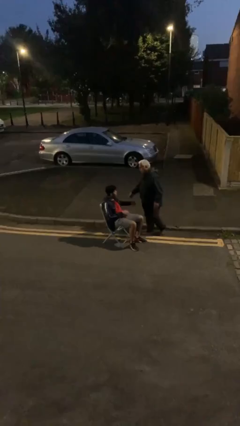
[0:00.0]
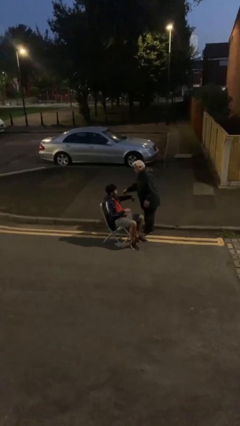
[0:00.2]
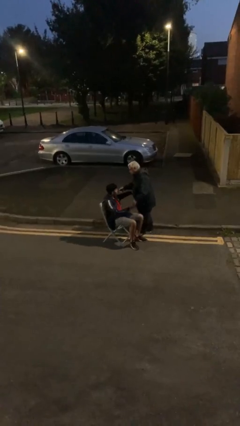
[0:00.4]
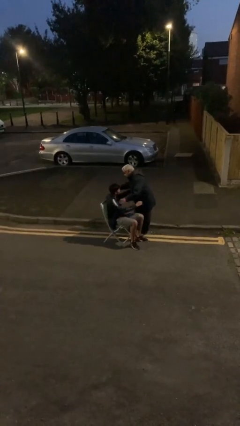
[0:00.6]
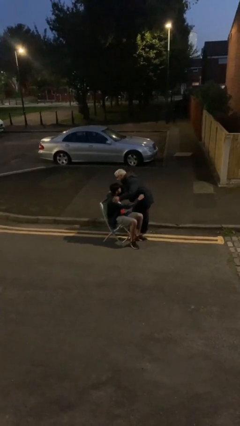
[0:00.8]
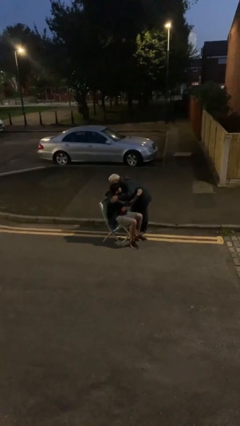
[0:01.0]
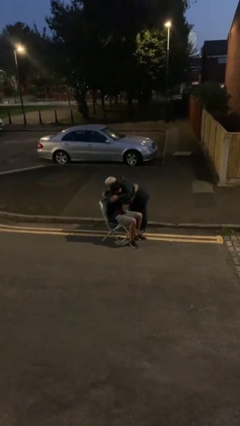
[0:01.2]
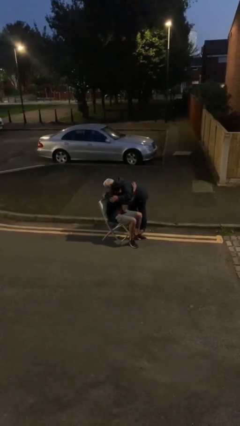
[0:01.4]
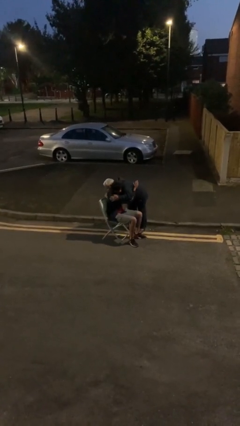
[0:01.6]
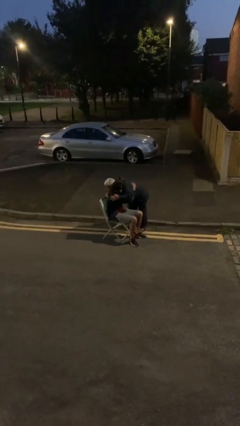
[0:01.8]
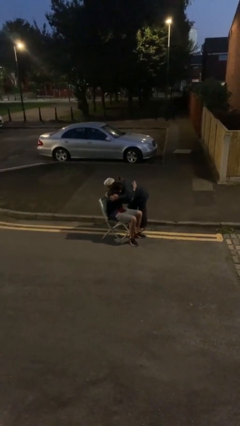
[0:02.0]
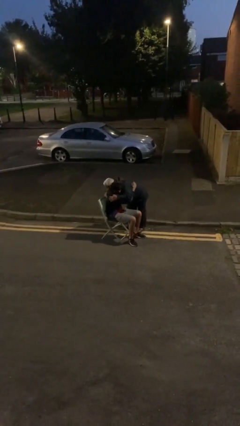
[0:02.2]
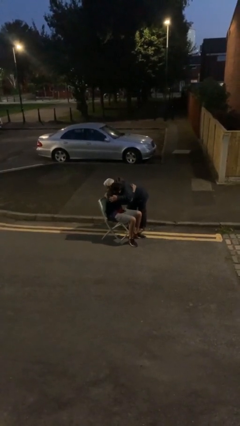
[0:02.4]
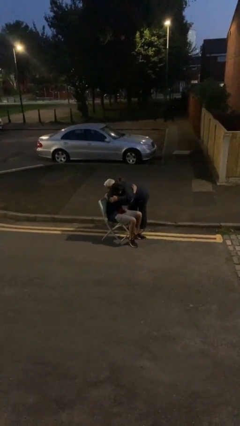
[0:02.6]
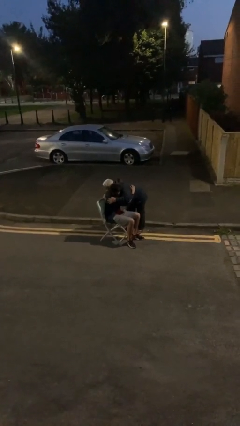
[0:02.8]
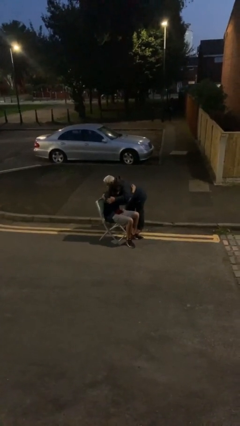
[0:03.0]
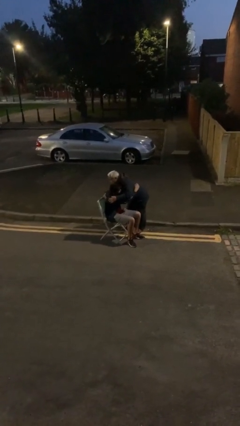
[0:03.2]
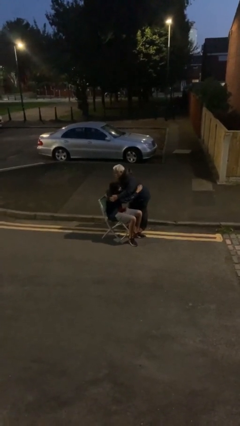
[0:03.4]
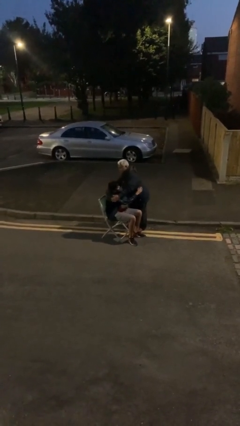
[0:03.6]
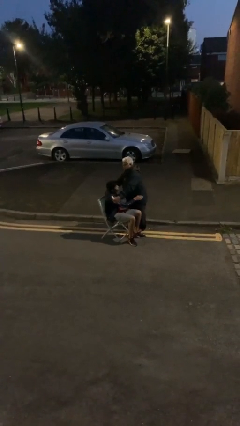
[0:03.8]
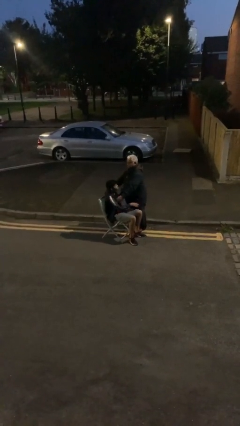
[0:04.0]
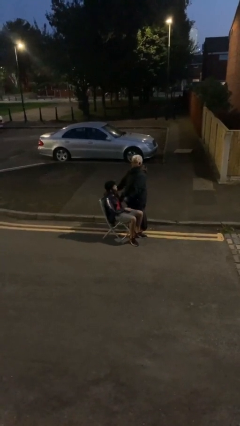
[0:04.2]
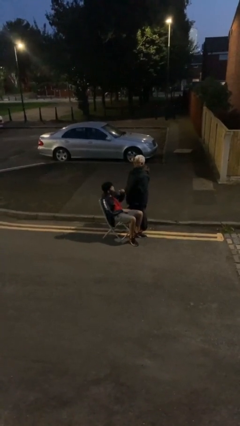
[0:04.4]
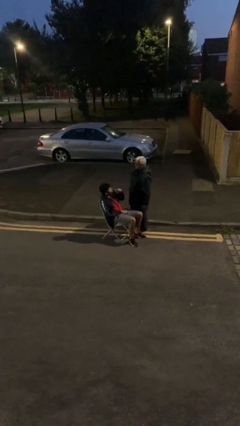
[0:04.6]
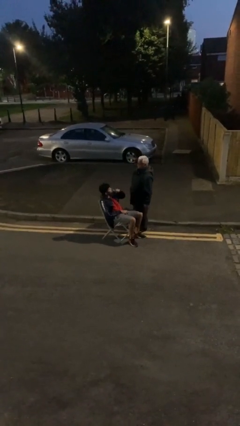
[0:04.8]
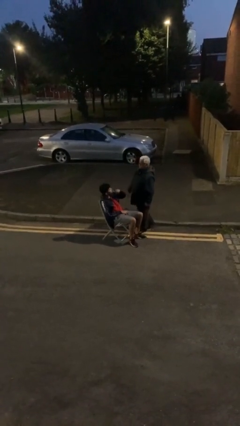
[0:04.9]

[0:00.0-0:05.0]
person embraces person

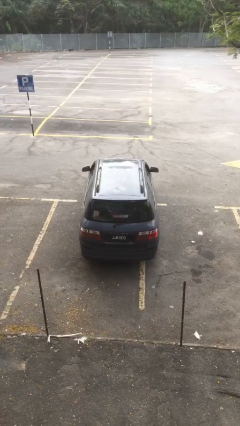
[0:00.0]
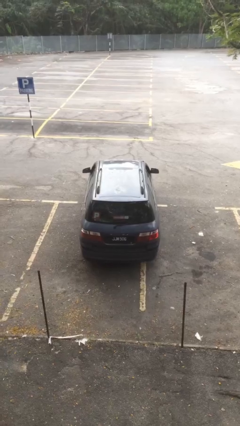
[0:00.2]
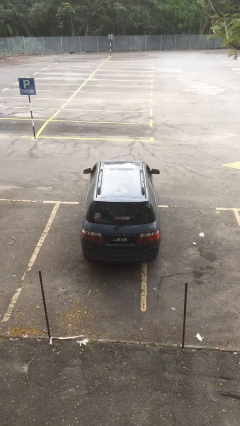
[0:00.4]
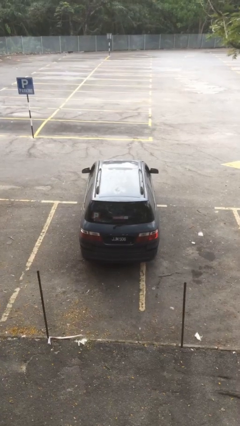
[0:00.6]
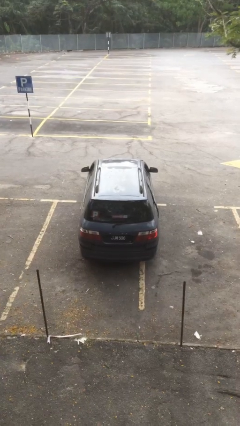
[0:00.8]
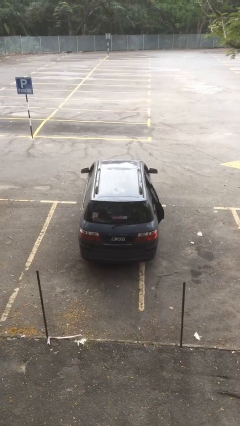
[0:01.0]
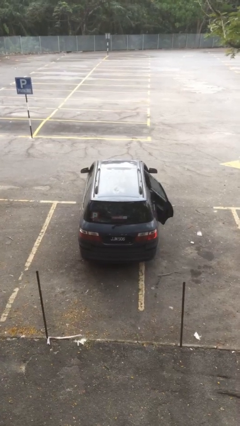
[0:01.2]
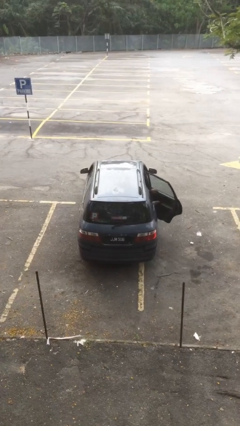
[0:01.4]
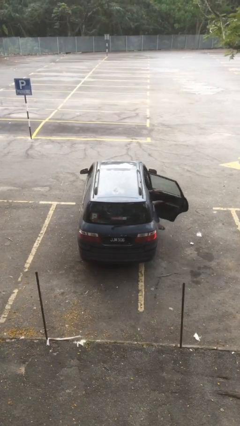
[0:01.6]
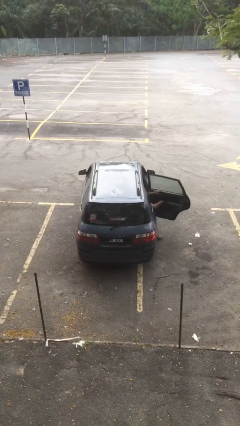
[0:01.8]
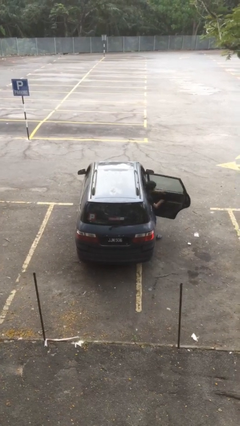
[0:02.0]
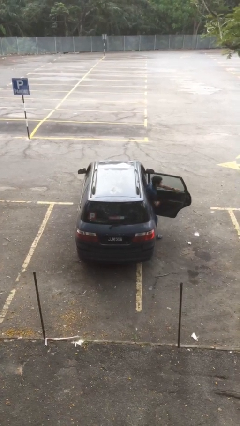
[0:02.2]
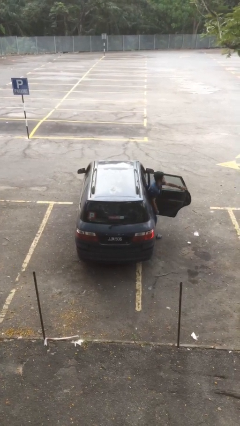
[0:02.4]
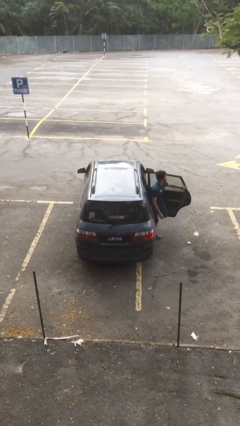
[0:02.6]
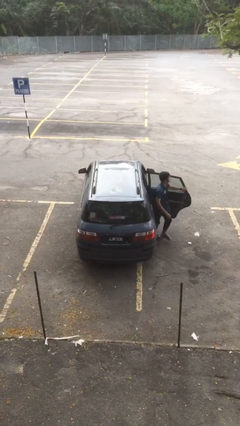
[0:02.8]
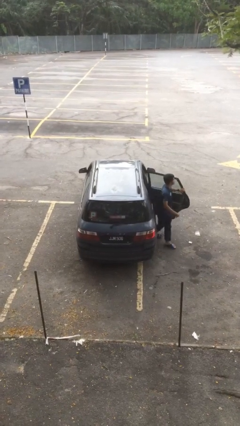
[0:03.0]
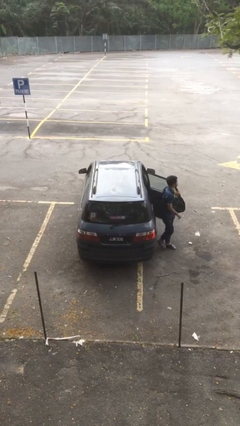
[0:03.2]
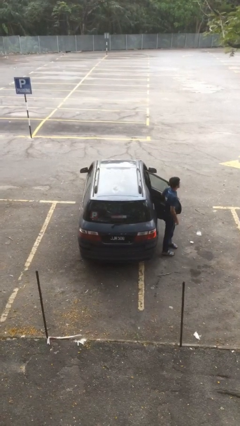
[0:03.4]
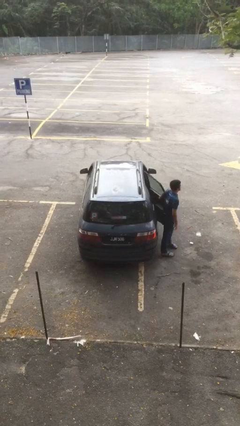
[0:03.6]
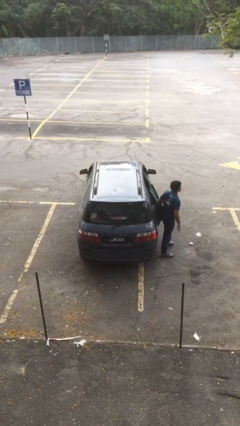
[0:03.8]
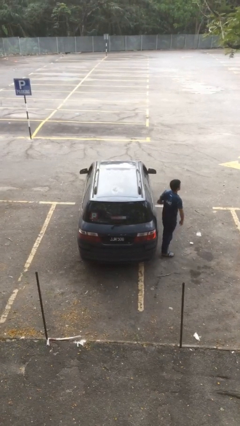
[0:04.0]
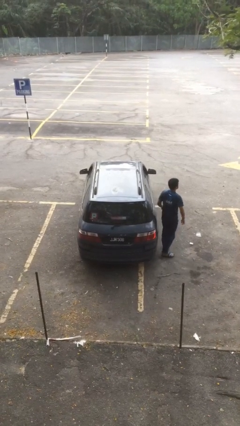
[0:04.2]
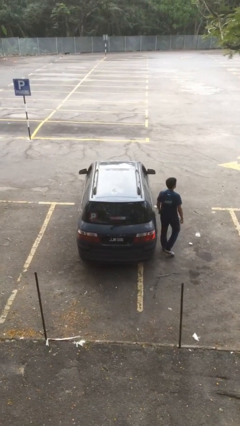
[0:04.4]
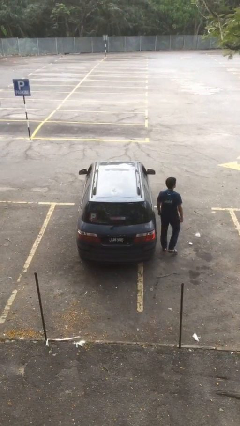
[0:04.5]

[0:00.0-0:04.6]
car drops off person

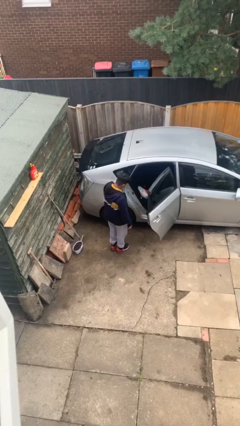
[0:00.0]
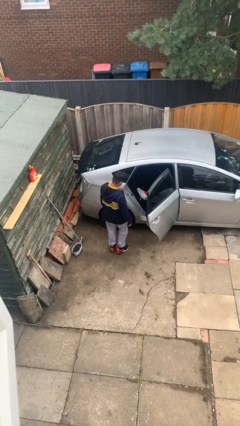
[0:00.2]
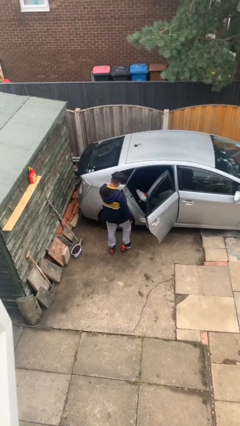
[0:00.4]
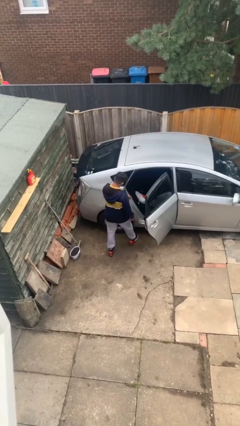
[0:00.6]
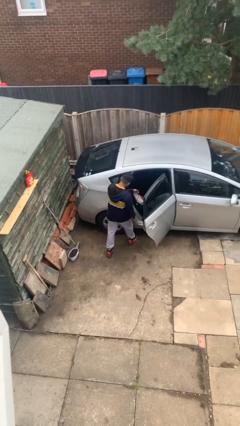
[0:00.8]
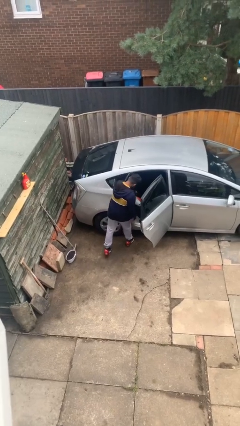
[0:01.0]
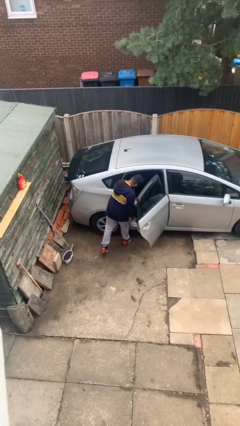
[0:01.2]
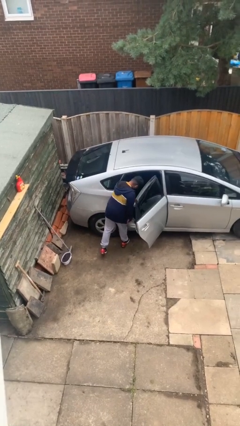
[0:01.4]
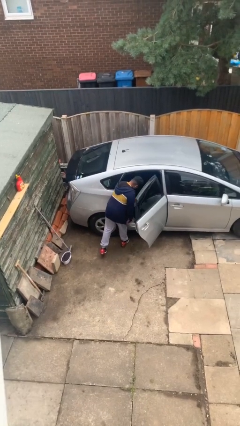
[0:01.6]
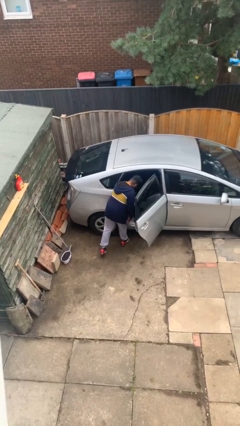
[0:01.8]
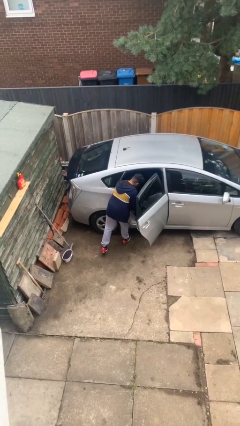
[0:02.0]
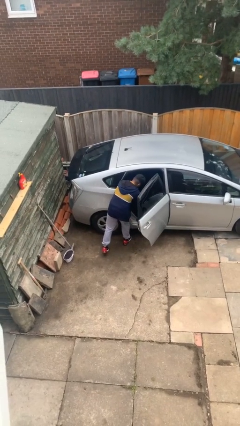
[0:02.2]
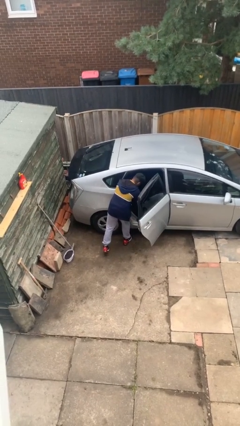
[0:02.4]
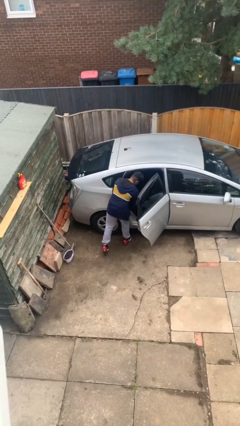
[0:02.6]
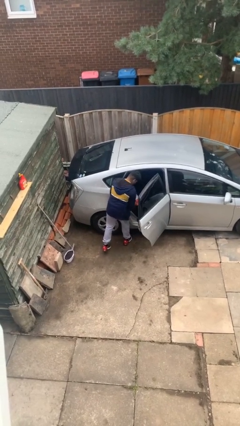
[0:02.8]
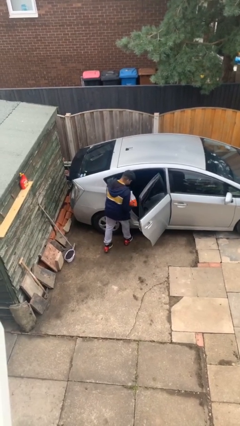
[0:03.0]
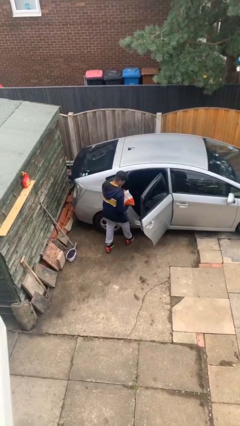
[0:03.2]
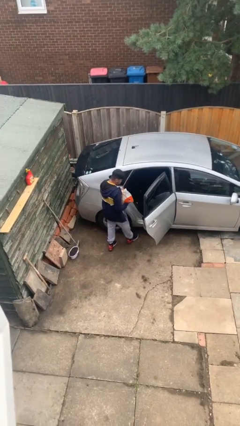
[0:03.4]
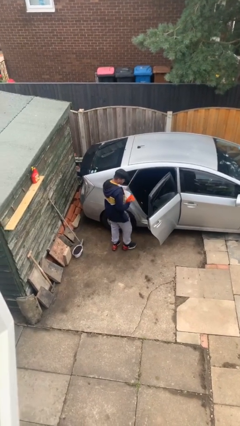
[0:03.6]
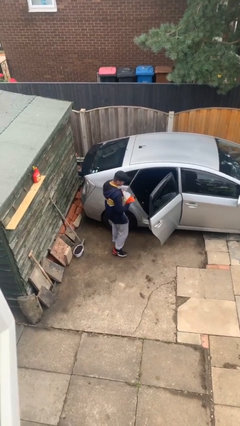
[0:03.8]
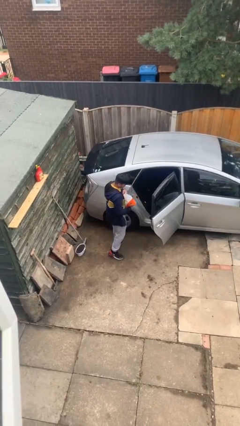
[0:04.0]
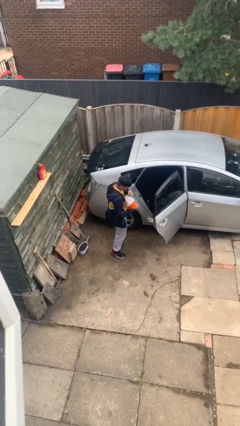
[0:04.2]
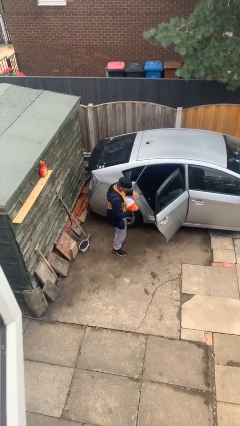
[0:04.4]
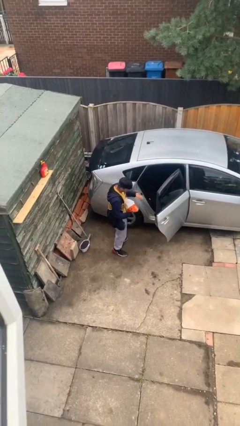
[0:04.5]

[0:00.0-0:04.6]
person unloads car

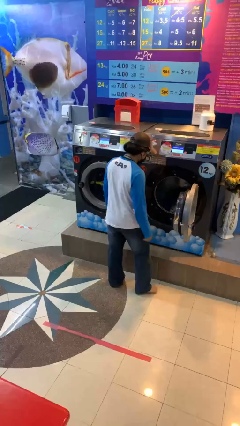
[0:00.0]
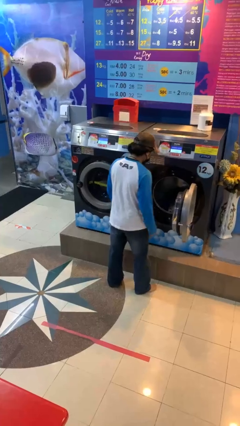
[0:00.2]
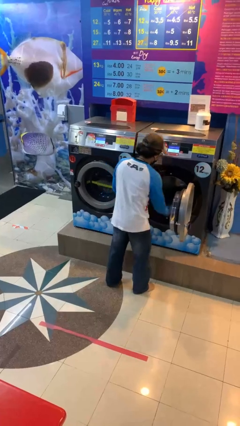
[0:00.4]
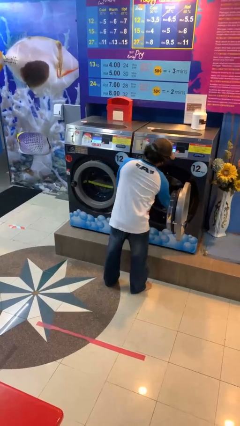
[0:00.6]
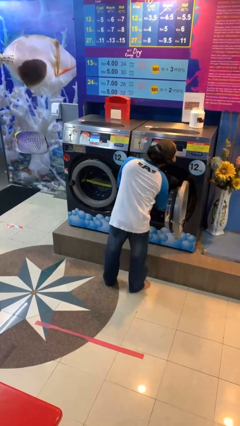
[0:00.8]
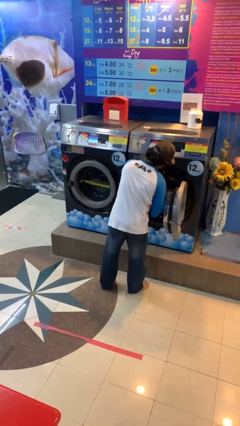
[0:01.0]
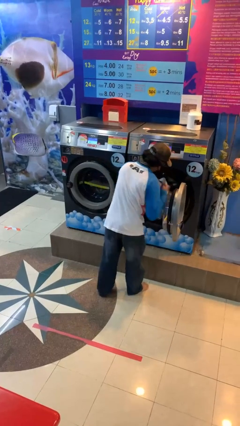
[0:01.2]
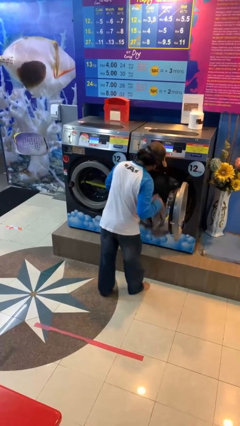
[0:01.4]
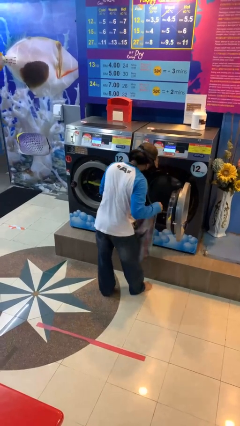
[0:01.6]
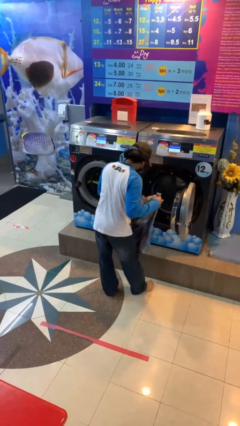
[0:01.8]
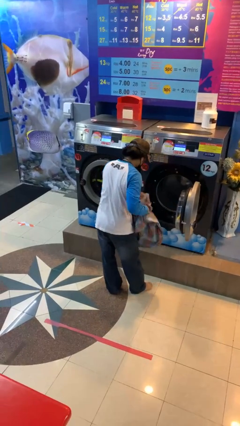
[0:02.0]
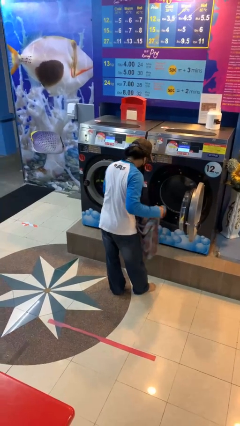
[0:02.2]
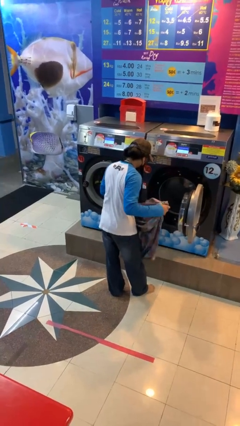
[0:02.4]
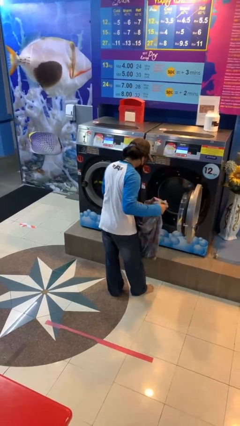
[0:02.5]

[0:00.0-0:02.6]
person unloads clotheswasher

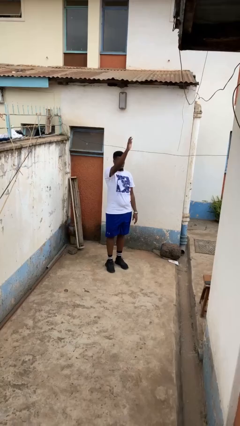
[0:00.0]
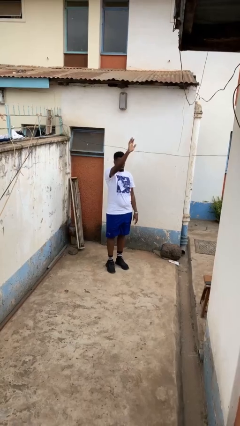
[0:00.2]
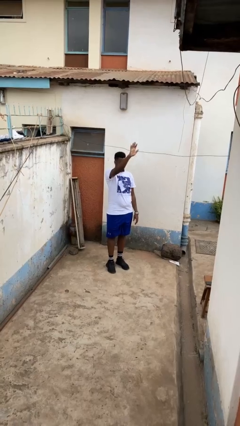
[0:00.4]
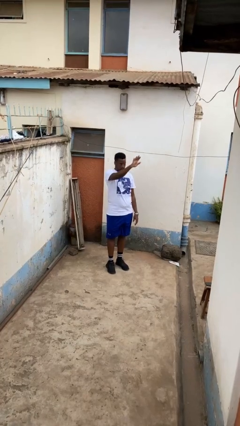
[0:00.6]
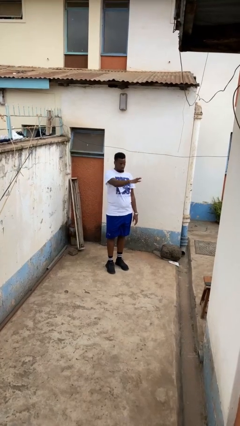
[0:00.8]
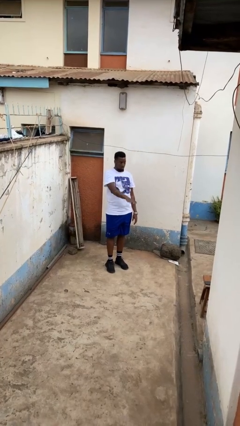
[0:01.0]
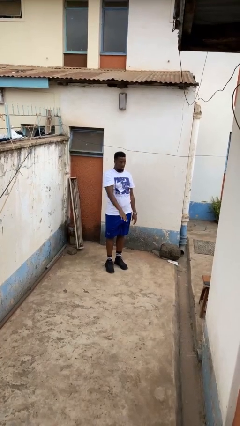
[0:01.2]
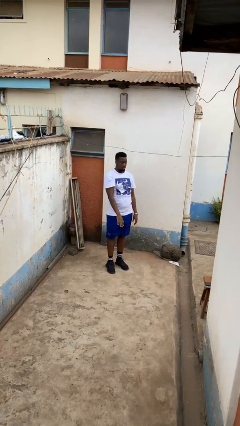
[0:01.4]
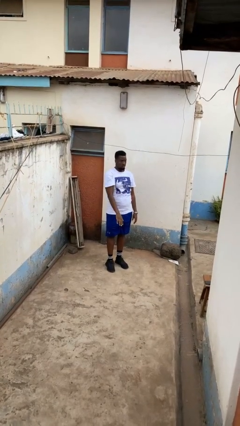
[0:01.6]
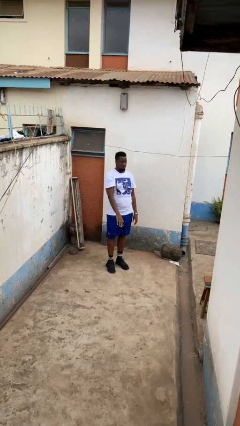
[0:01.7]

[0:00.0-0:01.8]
person gestures swipe down
